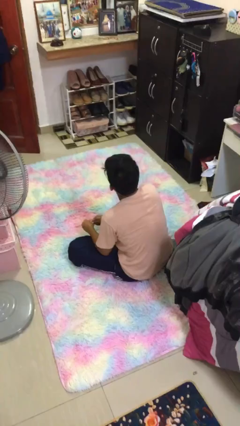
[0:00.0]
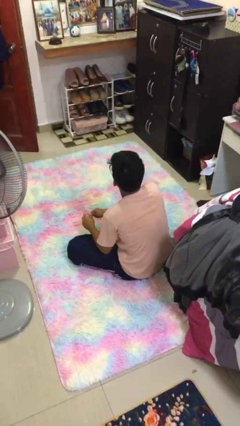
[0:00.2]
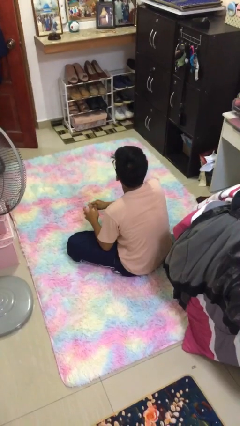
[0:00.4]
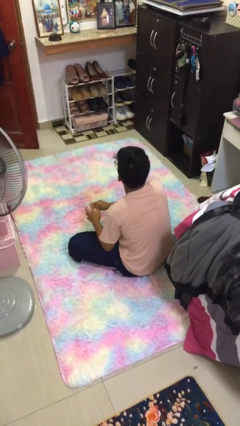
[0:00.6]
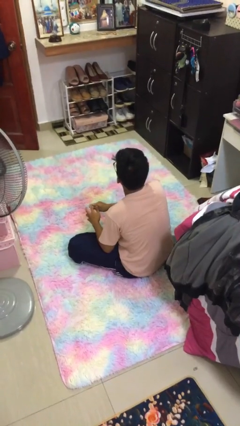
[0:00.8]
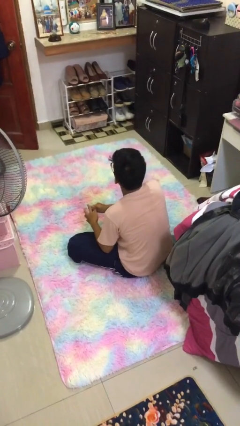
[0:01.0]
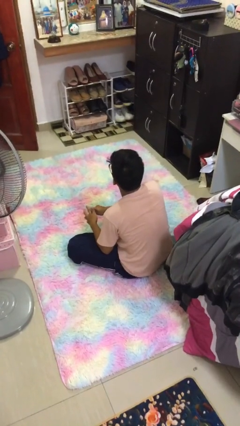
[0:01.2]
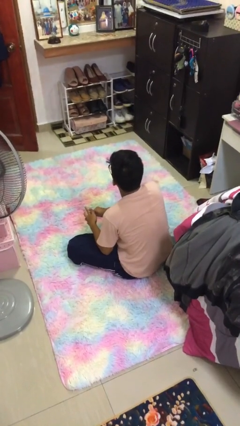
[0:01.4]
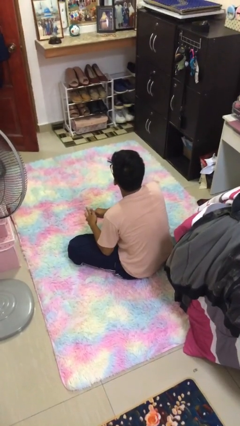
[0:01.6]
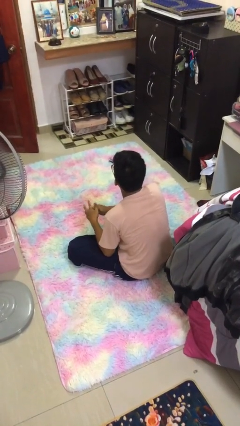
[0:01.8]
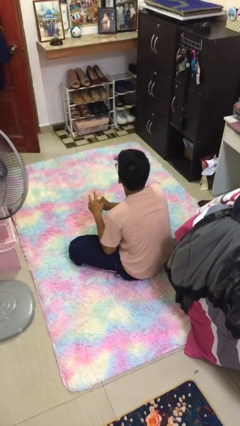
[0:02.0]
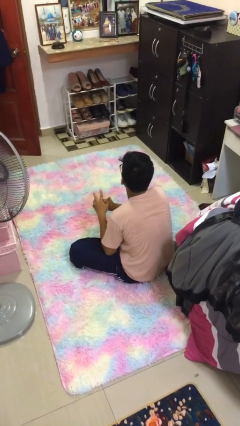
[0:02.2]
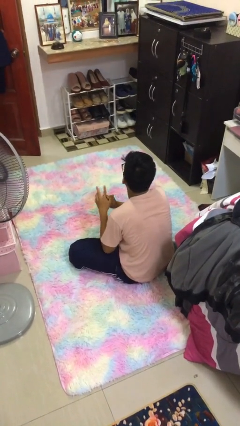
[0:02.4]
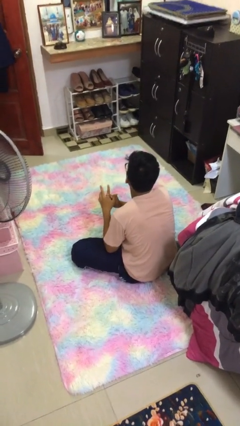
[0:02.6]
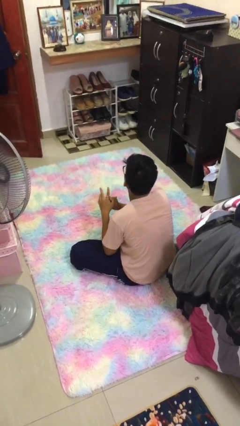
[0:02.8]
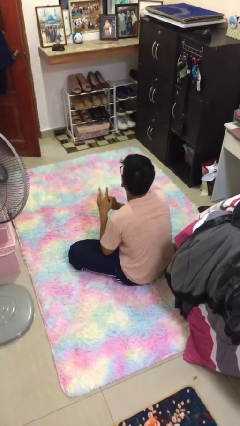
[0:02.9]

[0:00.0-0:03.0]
person puts on ring

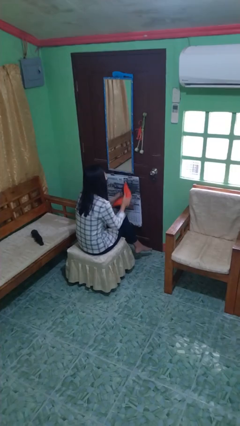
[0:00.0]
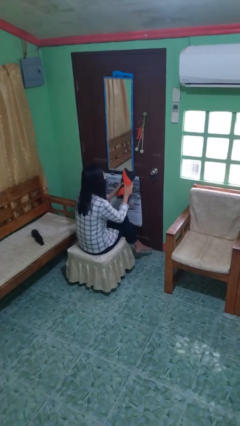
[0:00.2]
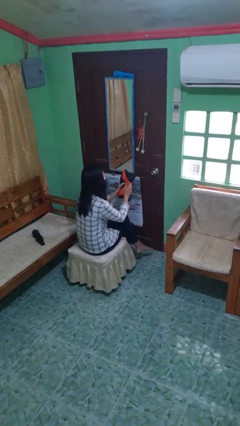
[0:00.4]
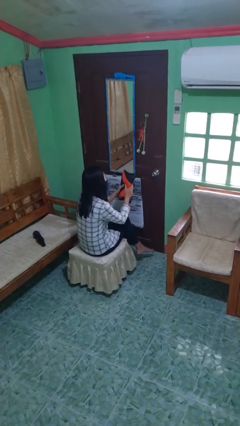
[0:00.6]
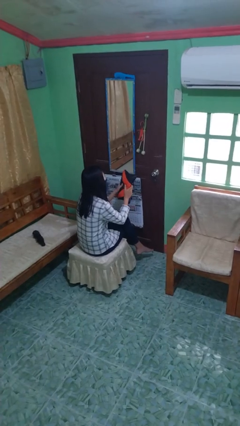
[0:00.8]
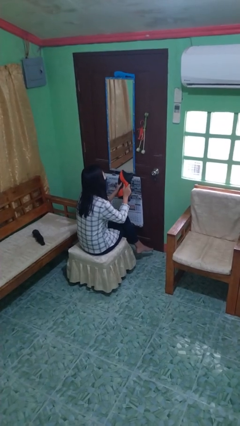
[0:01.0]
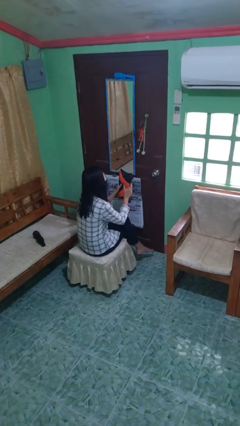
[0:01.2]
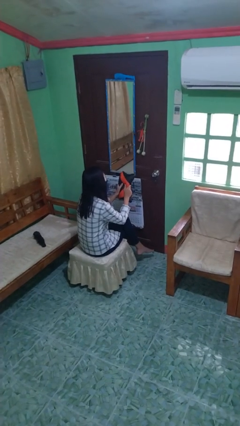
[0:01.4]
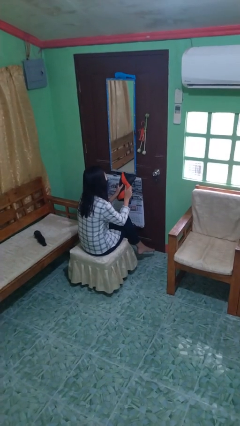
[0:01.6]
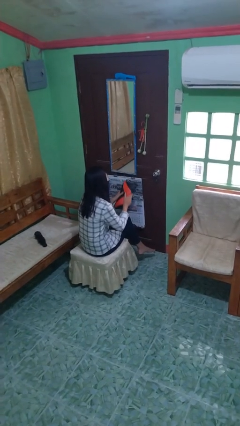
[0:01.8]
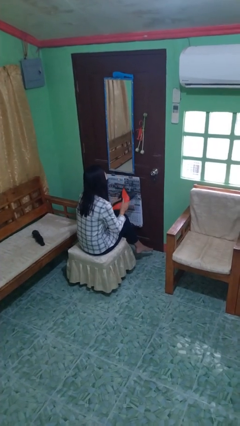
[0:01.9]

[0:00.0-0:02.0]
person squeezes object

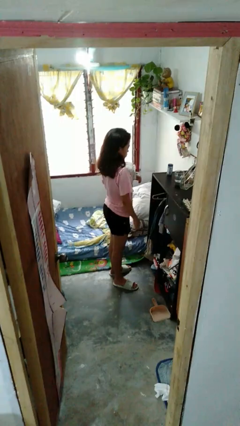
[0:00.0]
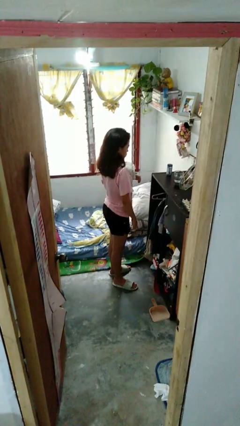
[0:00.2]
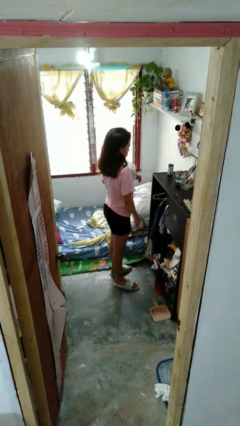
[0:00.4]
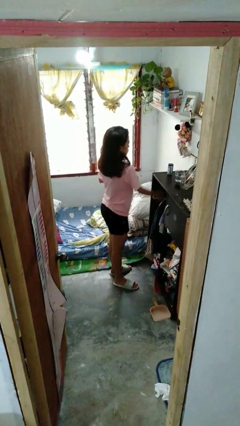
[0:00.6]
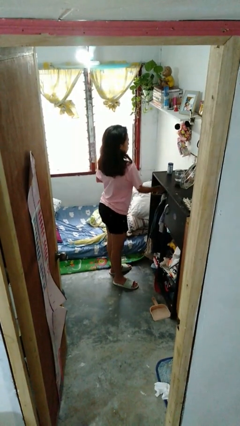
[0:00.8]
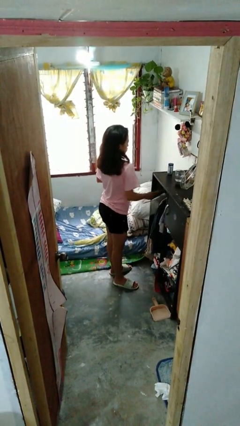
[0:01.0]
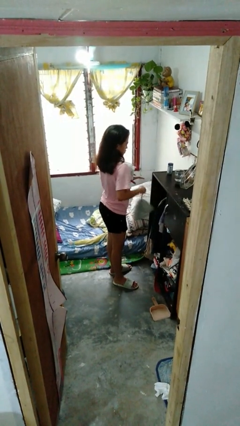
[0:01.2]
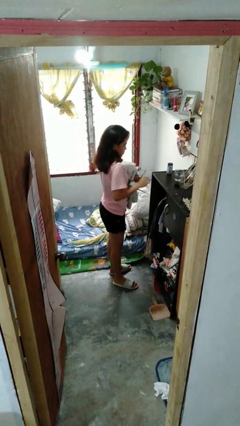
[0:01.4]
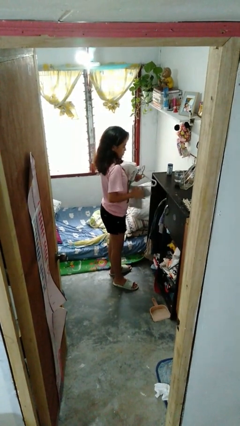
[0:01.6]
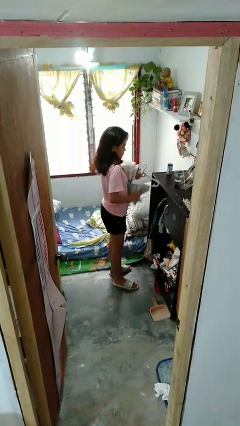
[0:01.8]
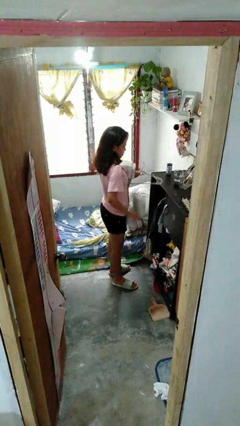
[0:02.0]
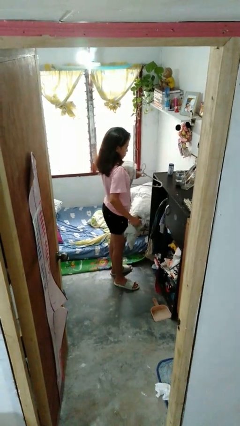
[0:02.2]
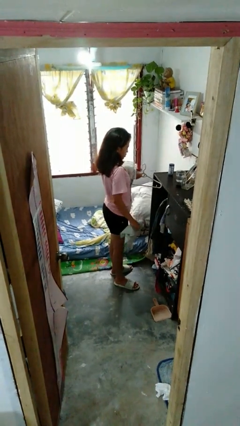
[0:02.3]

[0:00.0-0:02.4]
person takes clothes from closet

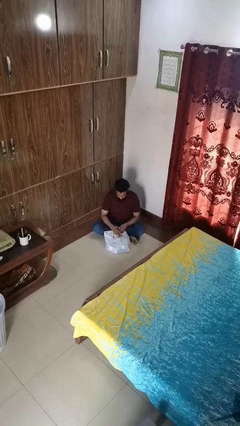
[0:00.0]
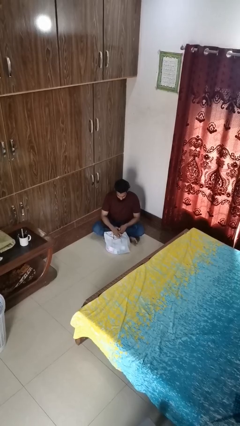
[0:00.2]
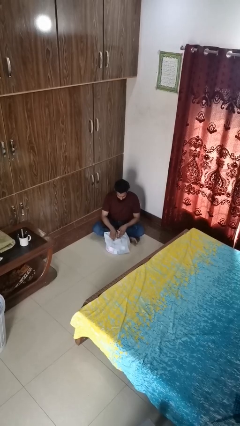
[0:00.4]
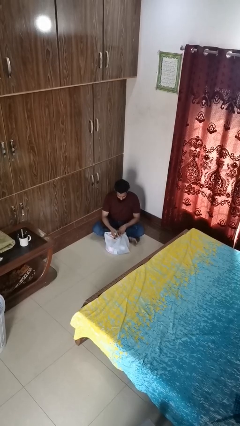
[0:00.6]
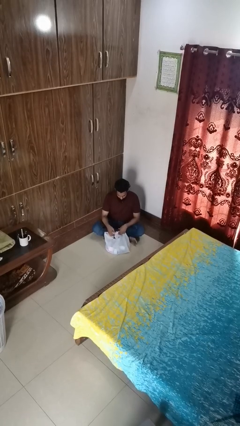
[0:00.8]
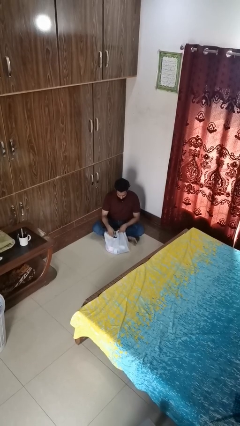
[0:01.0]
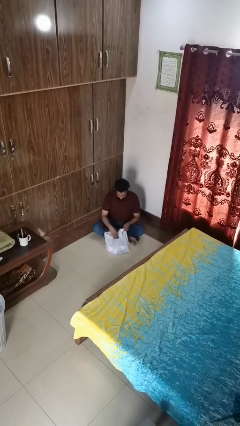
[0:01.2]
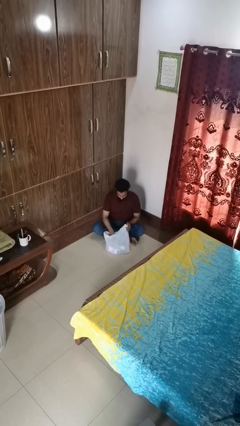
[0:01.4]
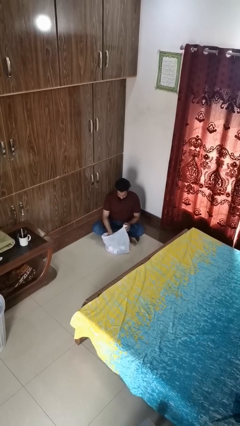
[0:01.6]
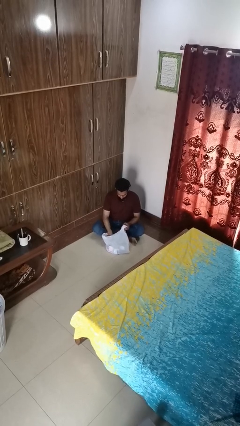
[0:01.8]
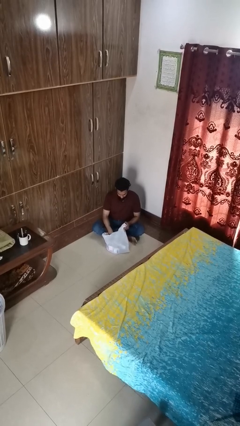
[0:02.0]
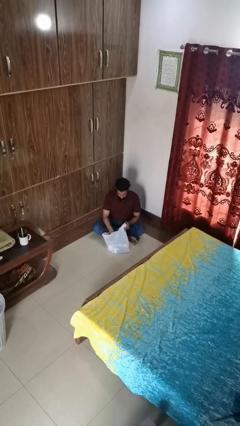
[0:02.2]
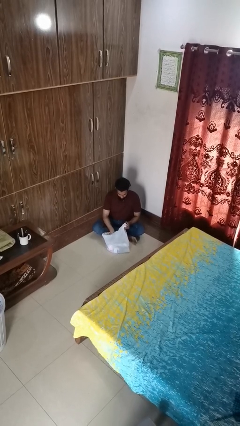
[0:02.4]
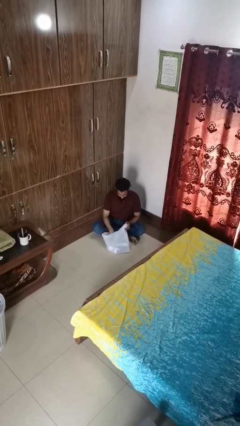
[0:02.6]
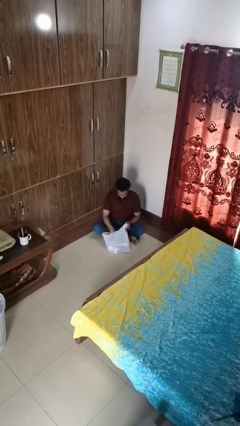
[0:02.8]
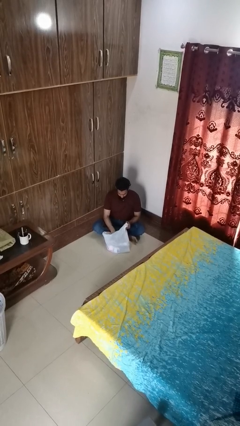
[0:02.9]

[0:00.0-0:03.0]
person searches in bag

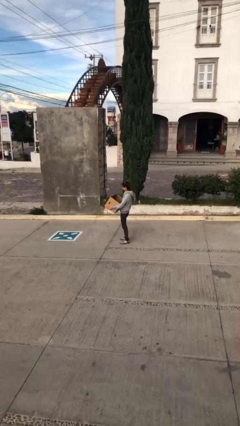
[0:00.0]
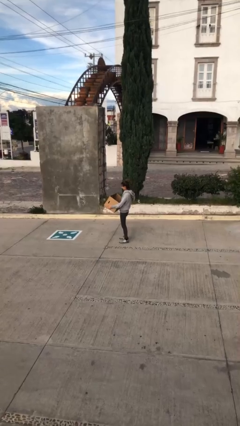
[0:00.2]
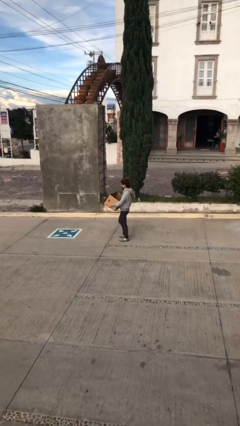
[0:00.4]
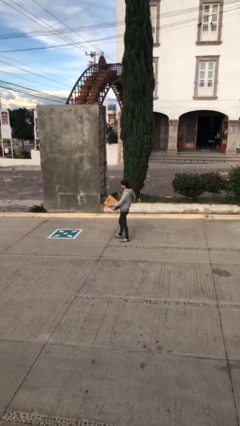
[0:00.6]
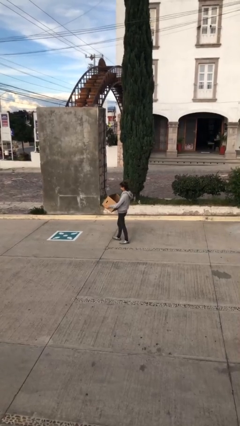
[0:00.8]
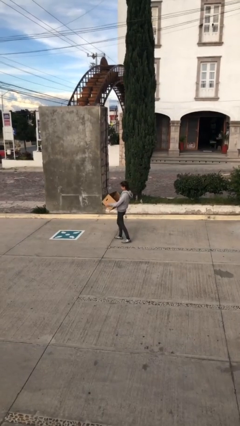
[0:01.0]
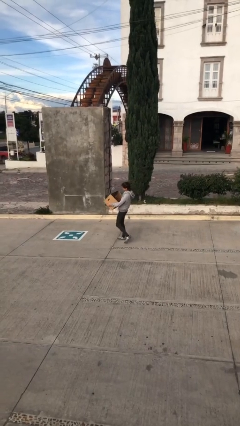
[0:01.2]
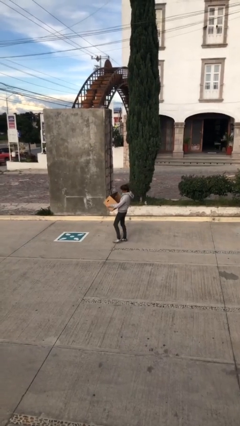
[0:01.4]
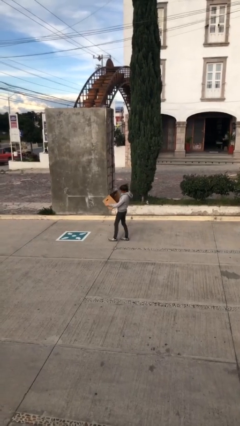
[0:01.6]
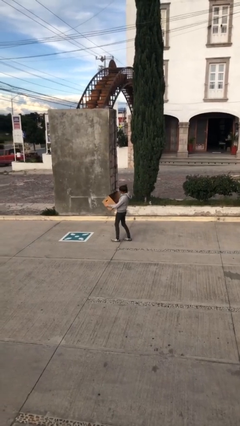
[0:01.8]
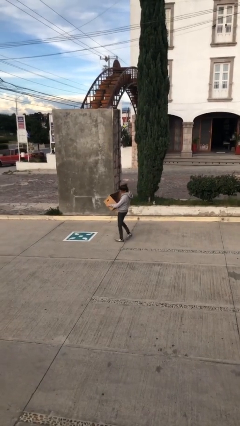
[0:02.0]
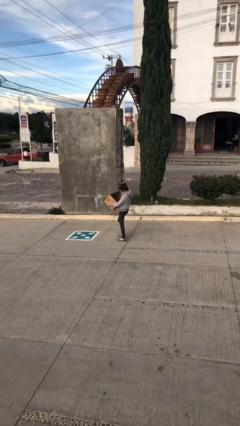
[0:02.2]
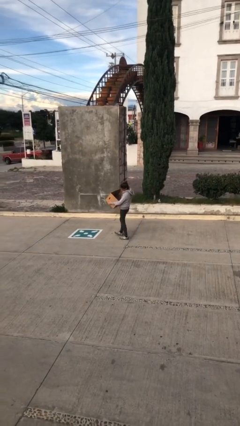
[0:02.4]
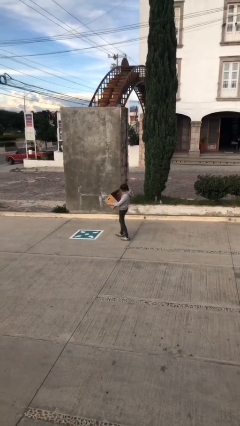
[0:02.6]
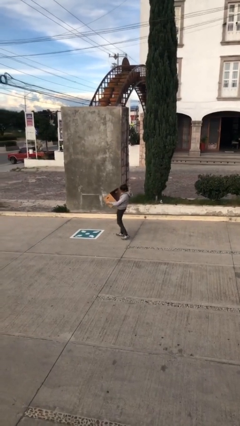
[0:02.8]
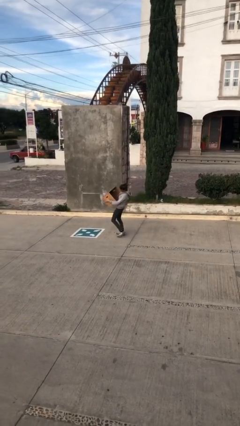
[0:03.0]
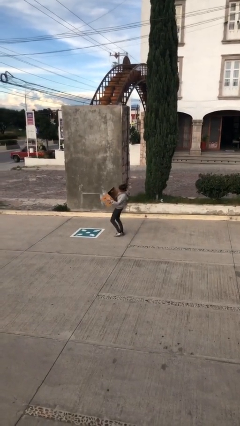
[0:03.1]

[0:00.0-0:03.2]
person carries heavy object

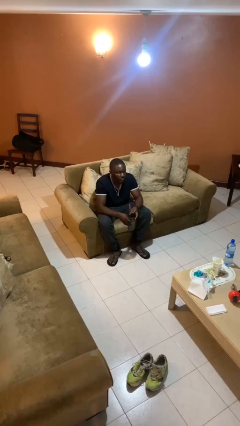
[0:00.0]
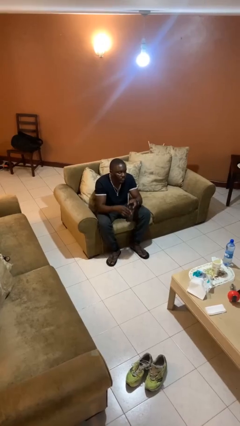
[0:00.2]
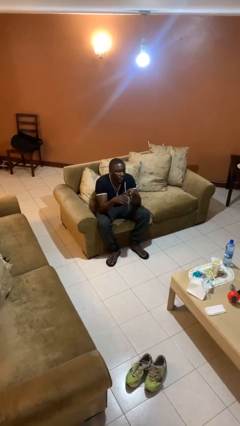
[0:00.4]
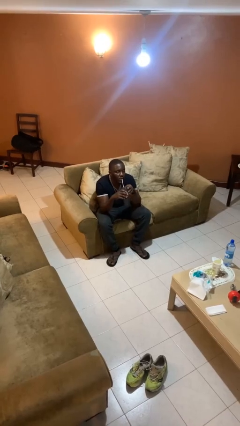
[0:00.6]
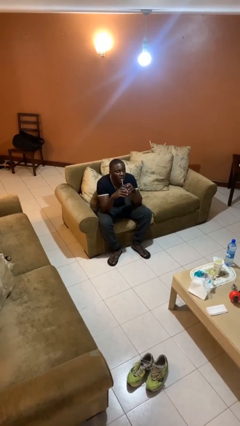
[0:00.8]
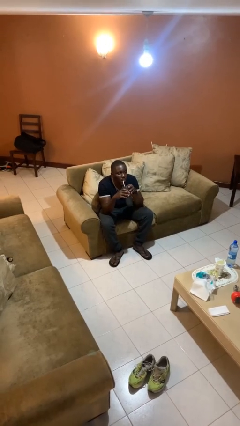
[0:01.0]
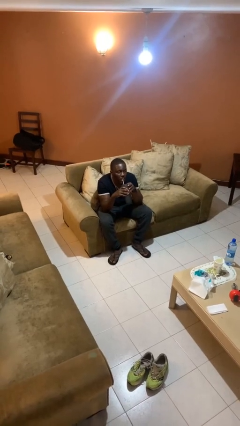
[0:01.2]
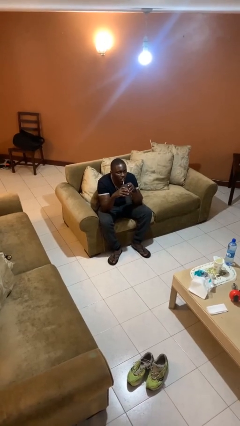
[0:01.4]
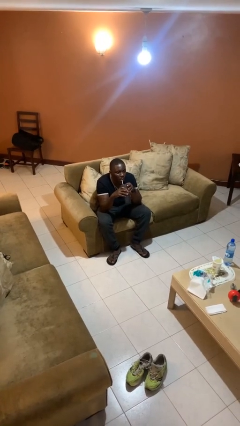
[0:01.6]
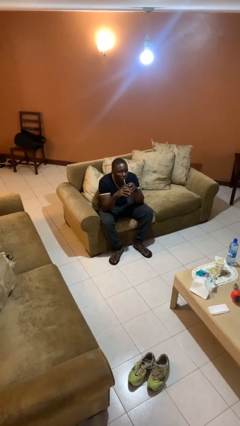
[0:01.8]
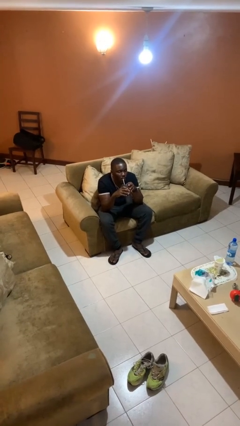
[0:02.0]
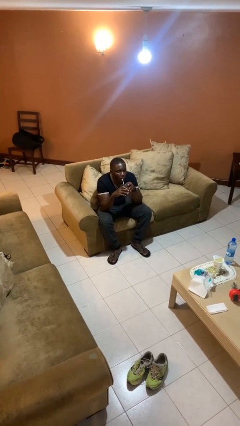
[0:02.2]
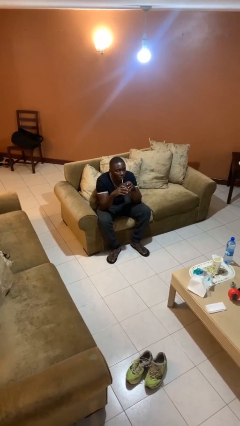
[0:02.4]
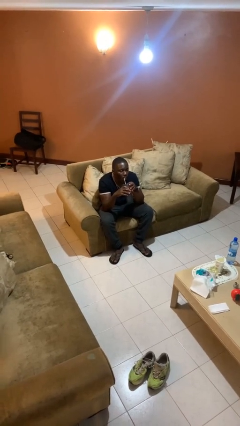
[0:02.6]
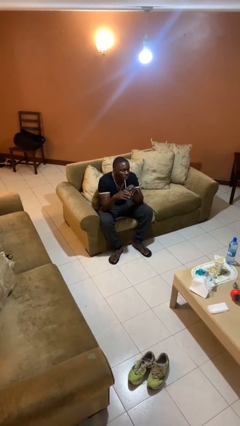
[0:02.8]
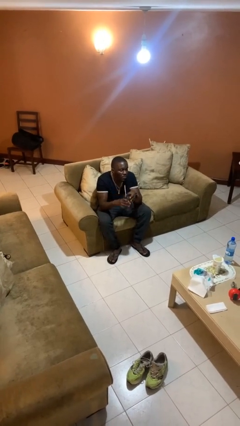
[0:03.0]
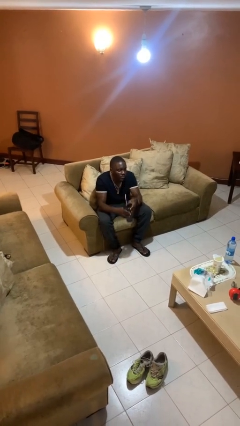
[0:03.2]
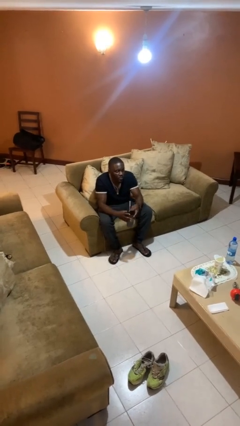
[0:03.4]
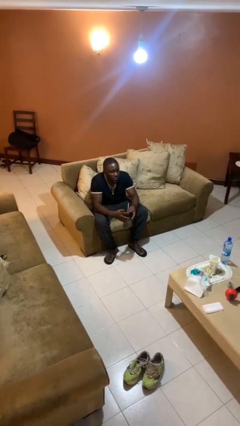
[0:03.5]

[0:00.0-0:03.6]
person drinks from straw

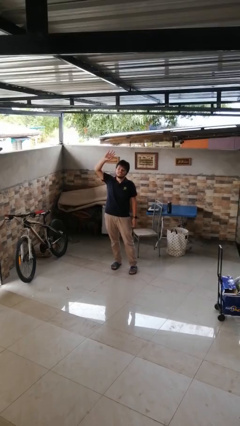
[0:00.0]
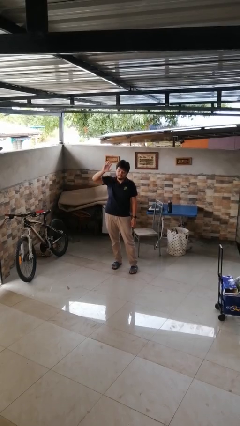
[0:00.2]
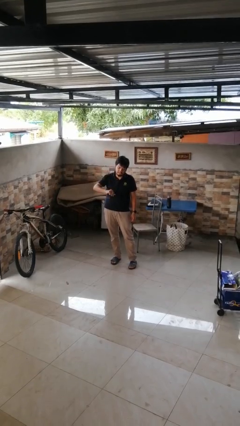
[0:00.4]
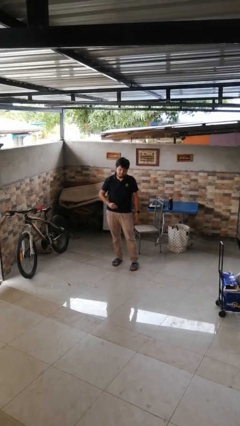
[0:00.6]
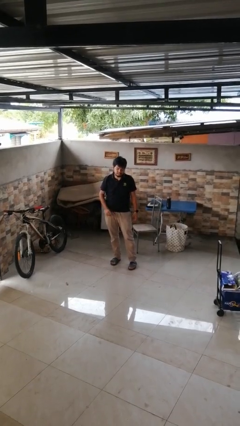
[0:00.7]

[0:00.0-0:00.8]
person gestures swipe down
